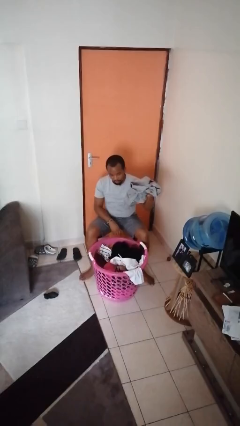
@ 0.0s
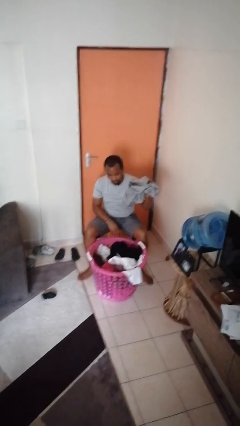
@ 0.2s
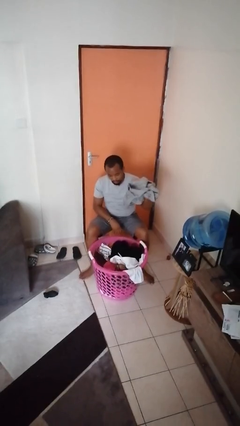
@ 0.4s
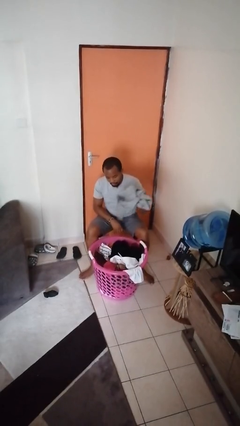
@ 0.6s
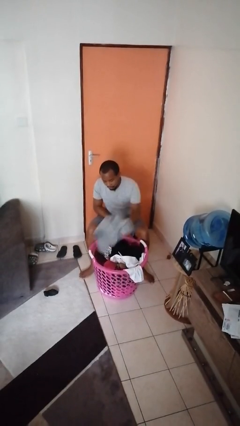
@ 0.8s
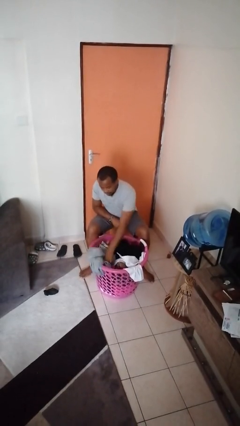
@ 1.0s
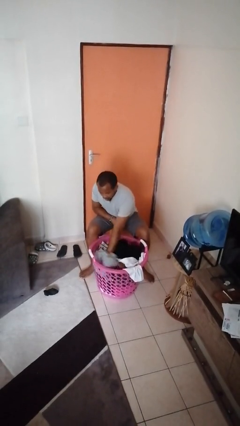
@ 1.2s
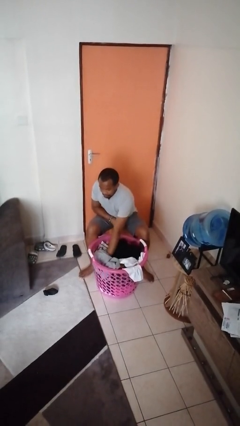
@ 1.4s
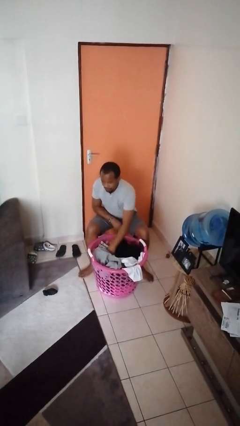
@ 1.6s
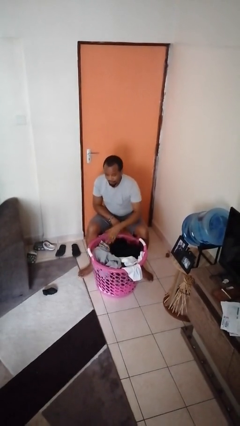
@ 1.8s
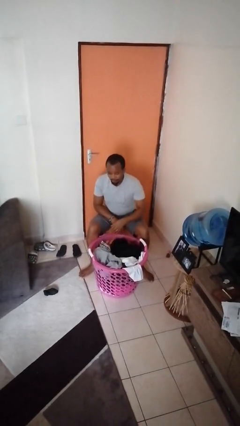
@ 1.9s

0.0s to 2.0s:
person puts object into basket

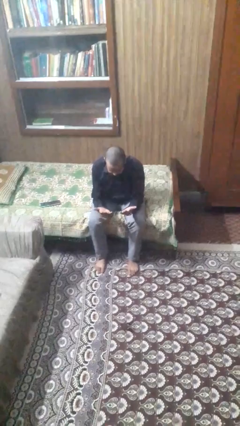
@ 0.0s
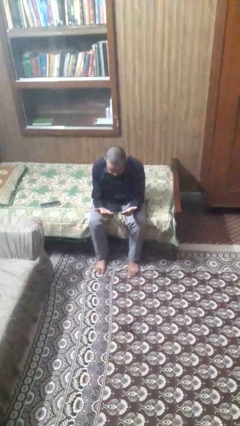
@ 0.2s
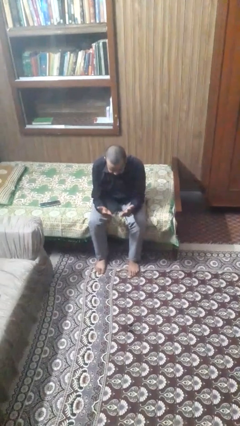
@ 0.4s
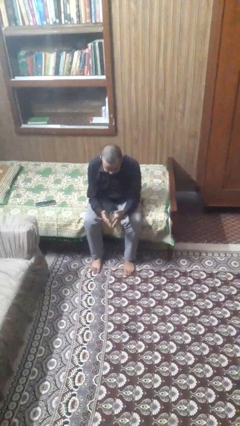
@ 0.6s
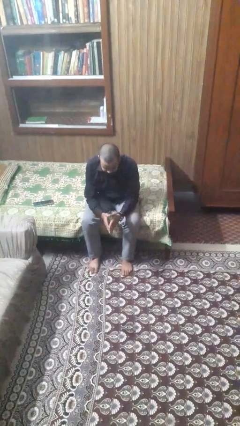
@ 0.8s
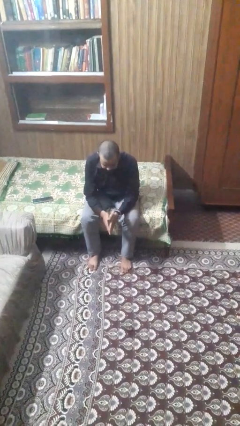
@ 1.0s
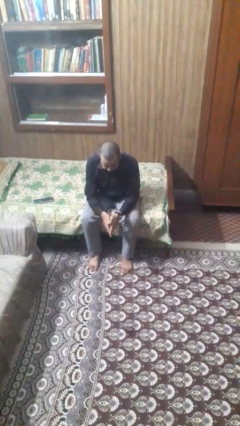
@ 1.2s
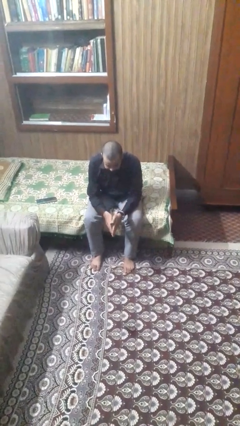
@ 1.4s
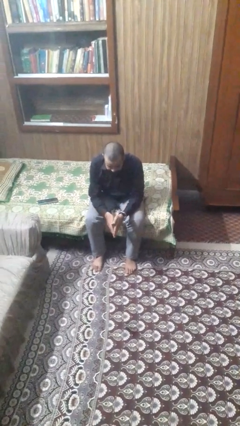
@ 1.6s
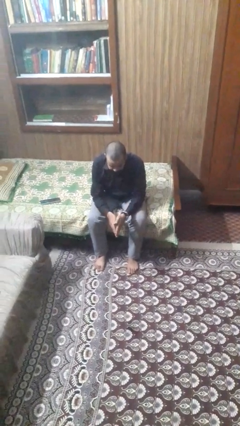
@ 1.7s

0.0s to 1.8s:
person looks at hands in lap

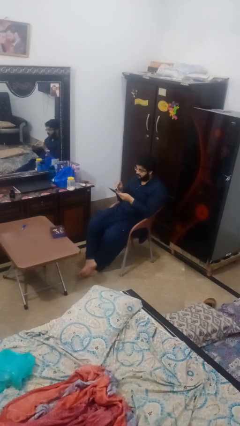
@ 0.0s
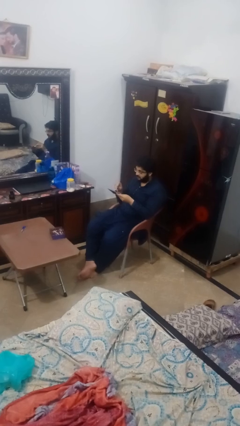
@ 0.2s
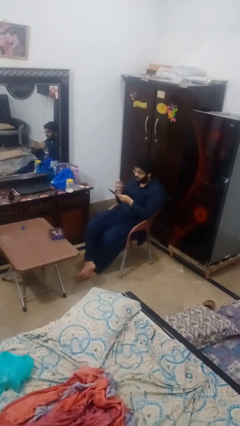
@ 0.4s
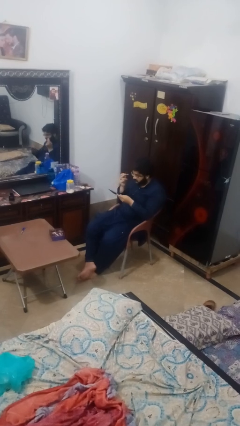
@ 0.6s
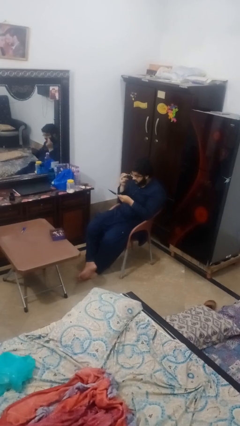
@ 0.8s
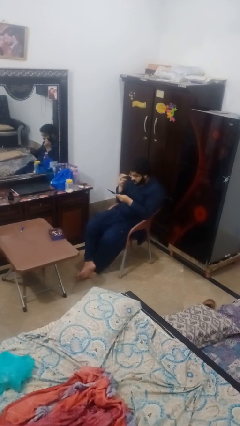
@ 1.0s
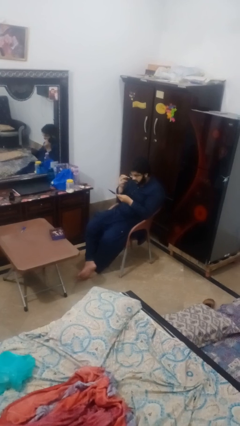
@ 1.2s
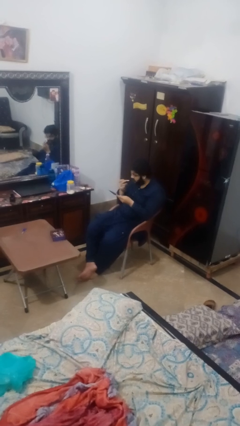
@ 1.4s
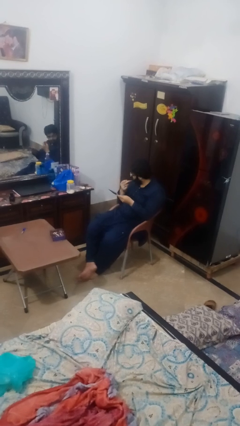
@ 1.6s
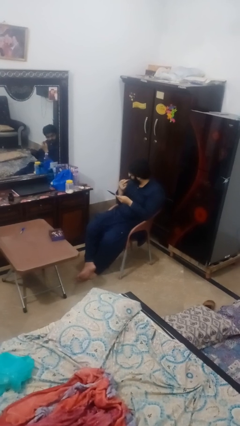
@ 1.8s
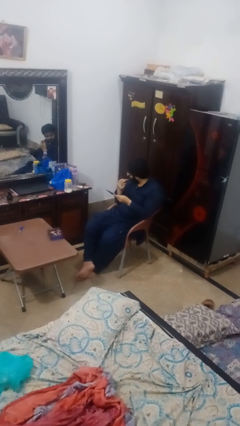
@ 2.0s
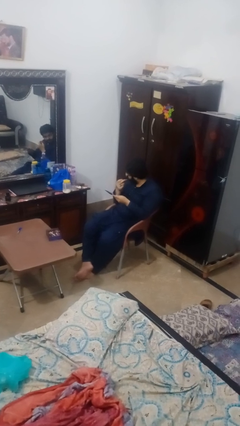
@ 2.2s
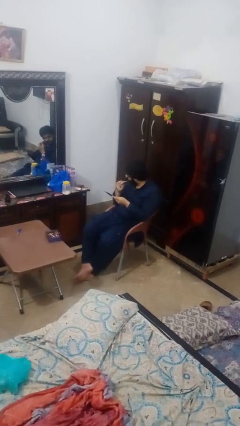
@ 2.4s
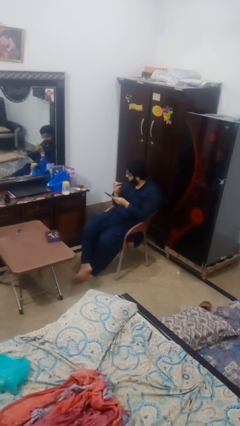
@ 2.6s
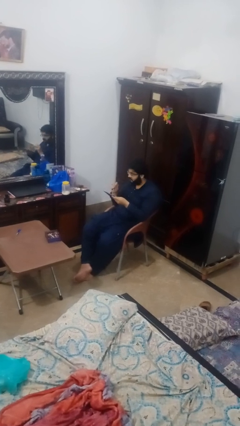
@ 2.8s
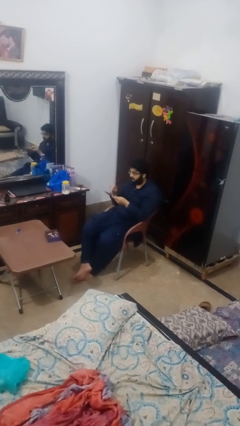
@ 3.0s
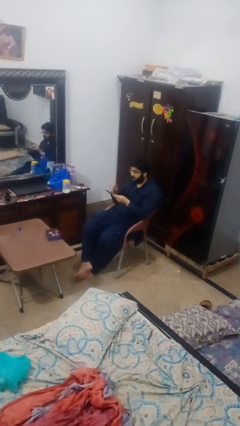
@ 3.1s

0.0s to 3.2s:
person applies foundation makeup

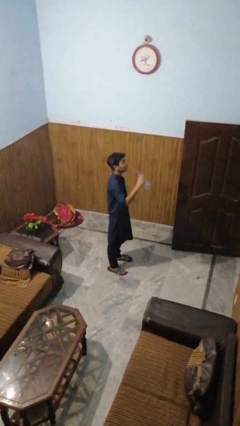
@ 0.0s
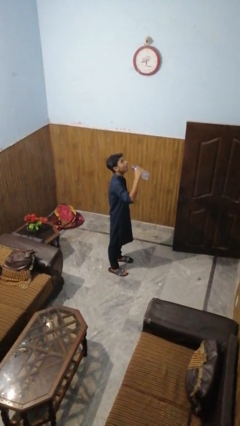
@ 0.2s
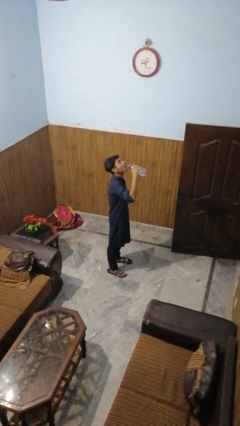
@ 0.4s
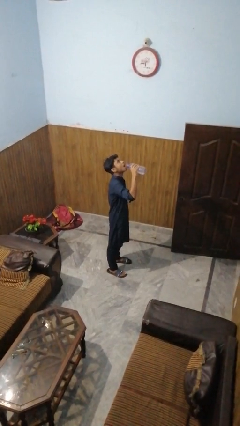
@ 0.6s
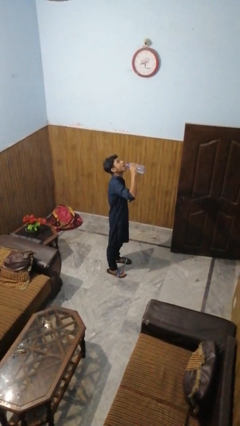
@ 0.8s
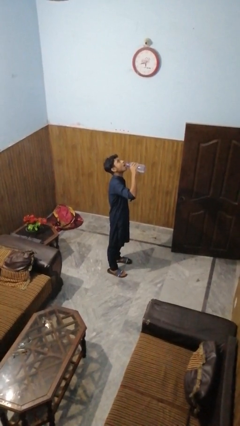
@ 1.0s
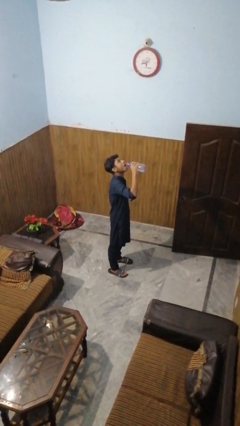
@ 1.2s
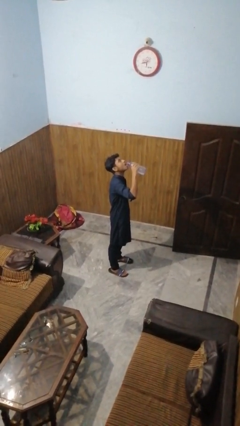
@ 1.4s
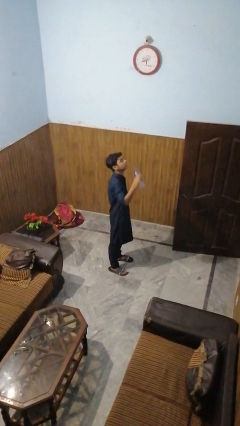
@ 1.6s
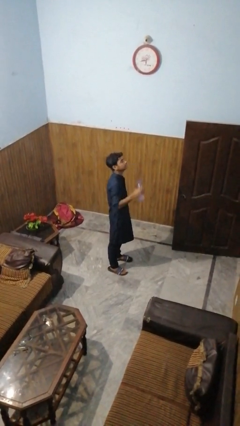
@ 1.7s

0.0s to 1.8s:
person drinks from bottle

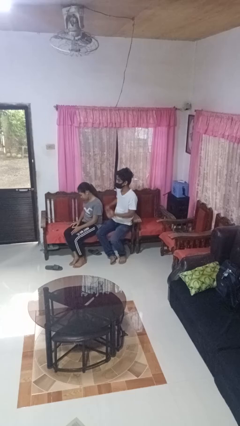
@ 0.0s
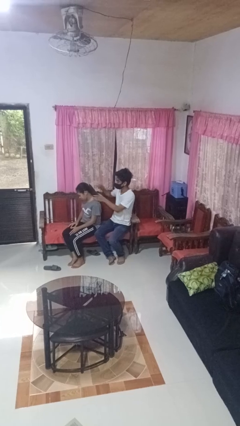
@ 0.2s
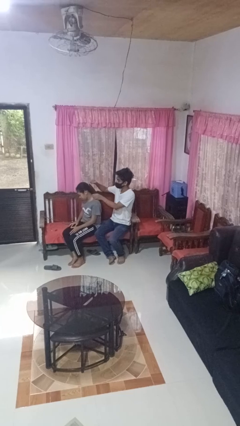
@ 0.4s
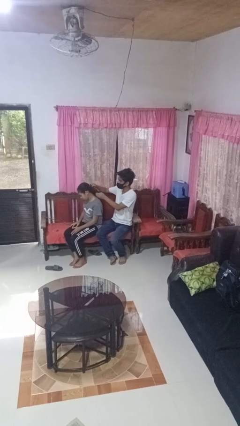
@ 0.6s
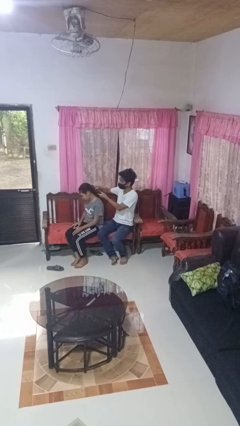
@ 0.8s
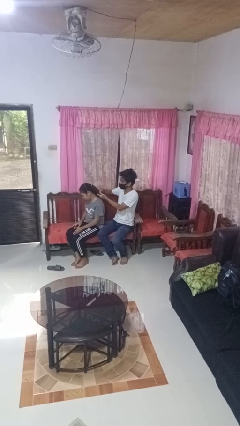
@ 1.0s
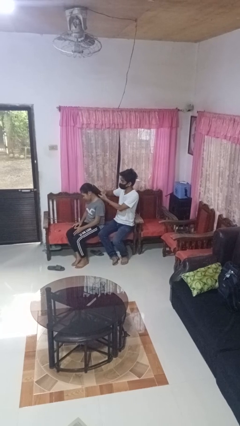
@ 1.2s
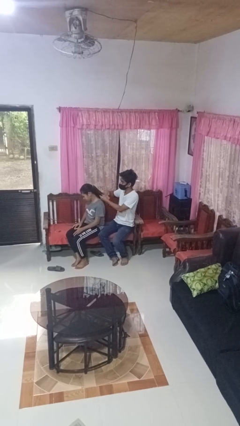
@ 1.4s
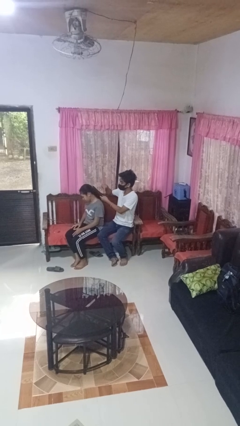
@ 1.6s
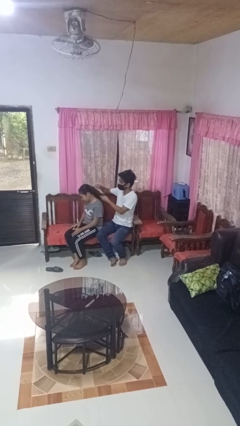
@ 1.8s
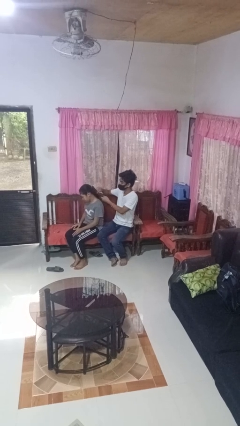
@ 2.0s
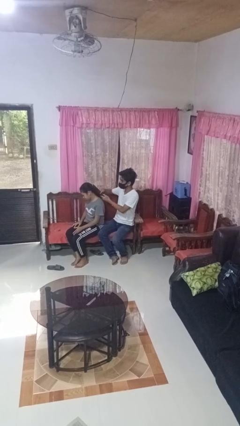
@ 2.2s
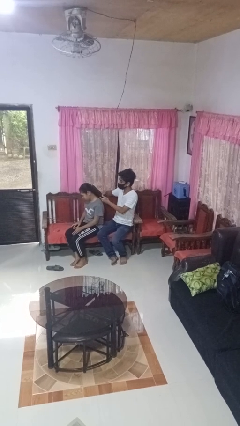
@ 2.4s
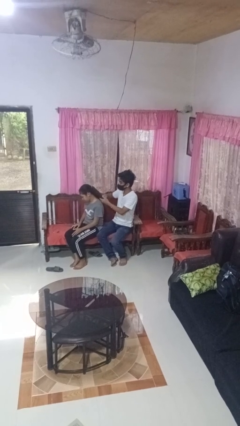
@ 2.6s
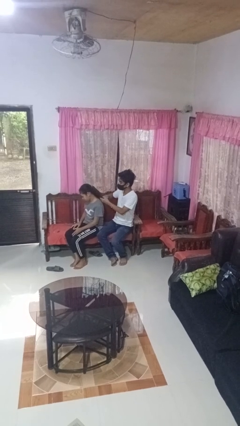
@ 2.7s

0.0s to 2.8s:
person brushes hair of person

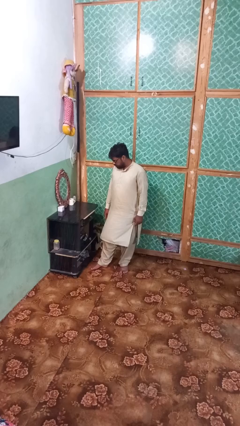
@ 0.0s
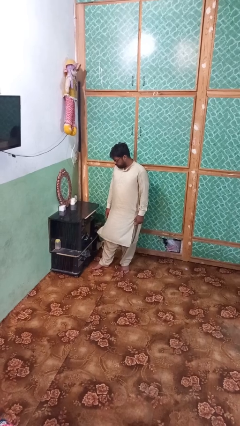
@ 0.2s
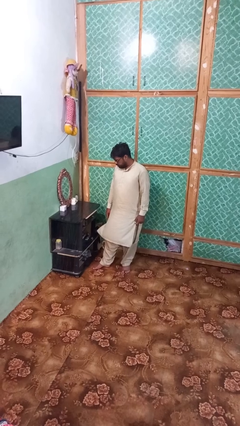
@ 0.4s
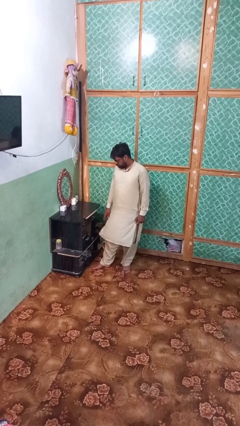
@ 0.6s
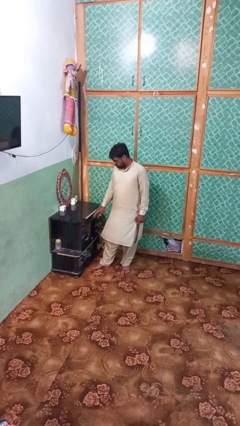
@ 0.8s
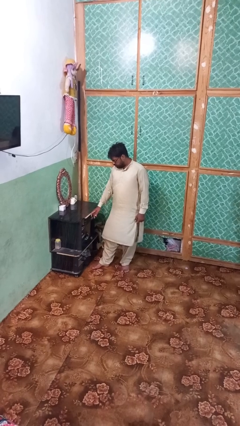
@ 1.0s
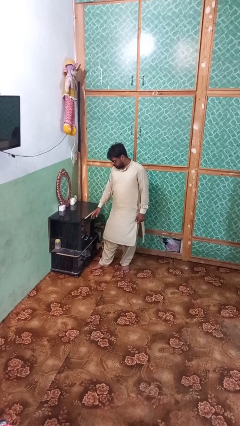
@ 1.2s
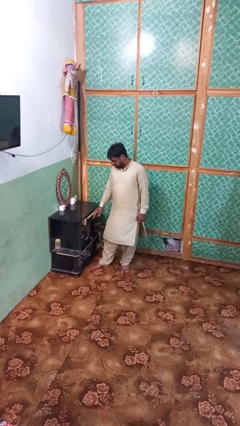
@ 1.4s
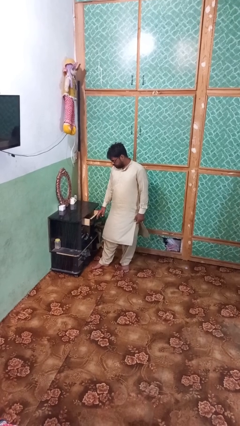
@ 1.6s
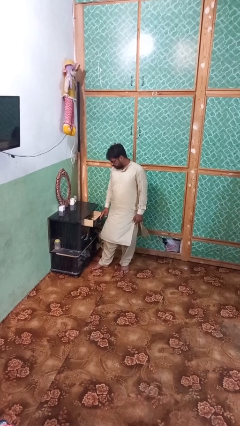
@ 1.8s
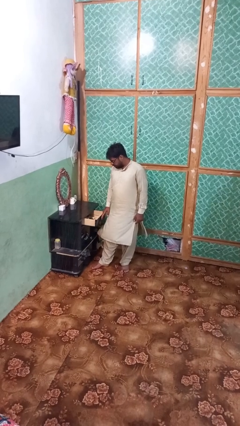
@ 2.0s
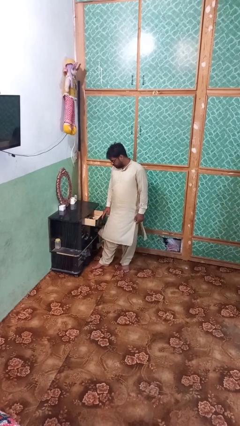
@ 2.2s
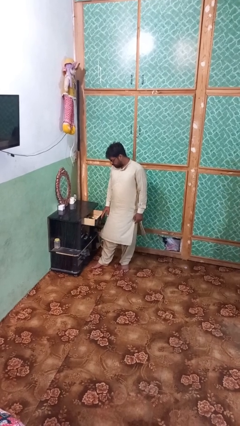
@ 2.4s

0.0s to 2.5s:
person opens dresser drawer

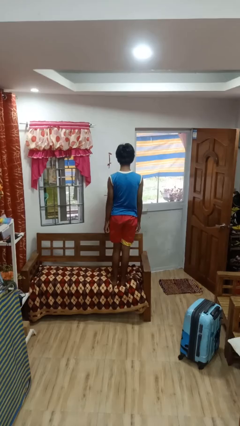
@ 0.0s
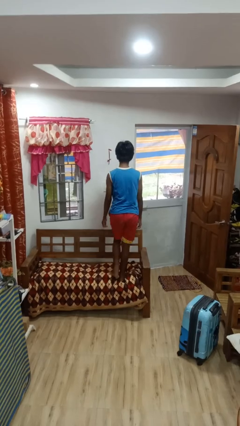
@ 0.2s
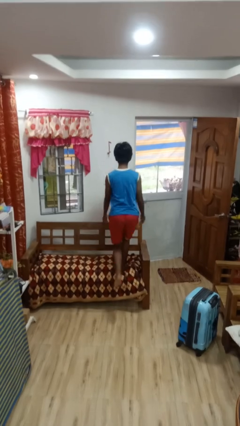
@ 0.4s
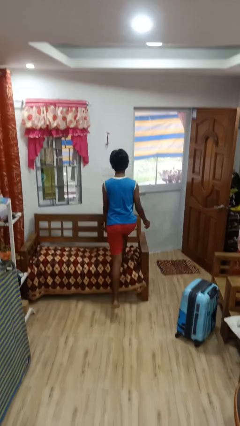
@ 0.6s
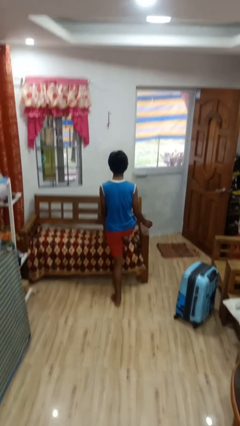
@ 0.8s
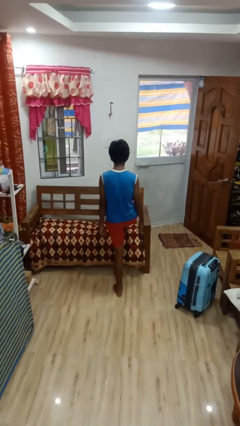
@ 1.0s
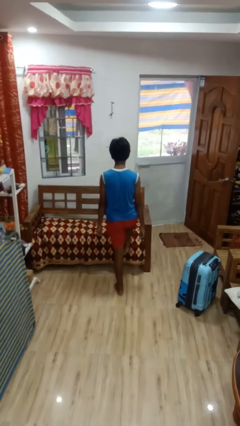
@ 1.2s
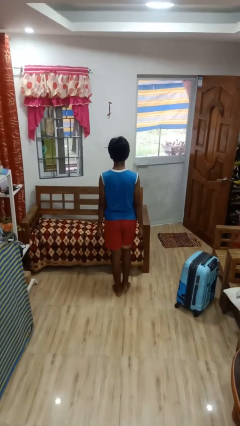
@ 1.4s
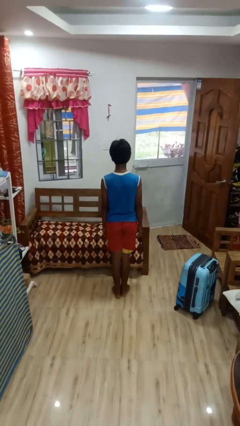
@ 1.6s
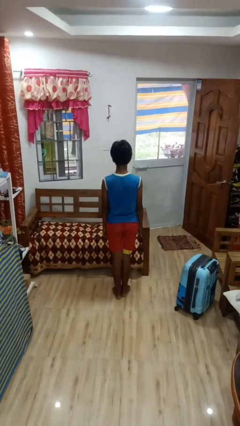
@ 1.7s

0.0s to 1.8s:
person climbs off couch

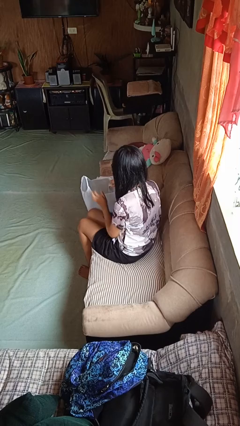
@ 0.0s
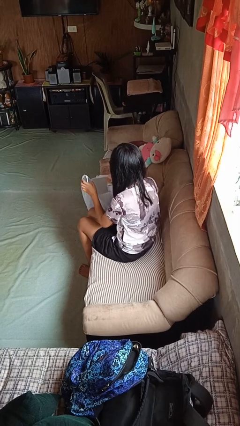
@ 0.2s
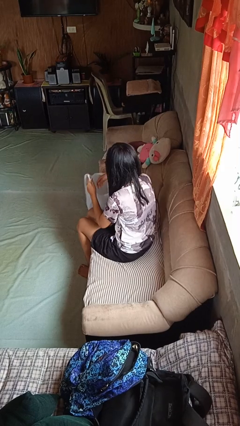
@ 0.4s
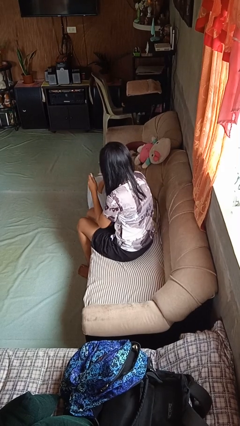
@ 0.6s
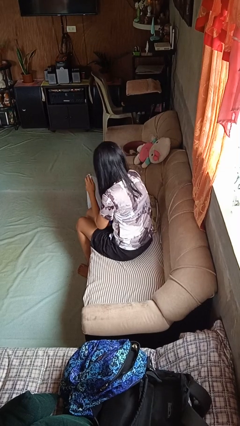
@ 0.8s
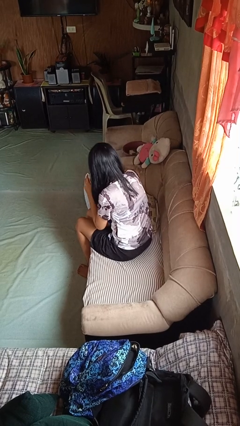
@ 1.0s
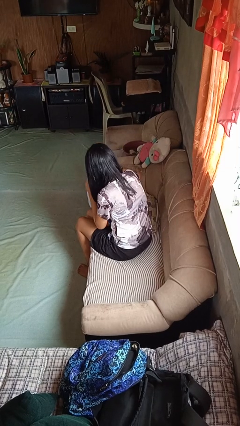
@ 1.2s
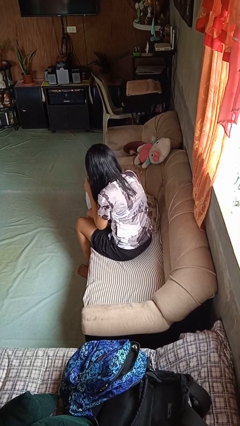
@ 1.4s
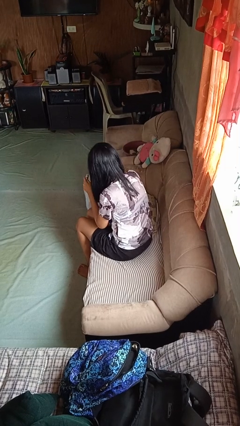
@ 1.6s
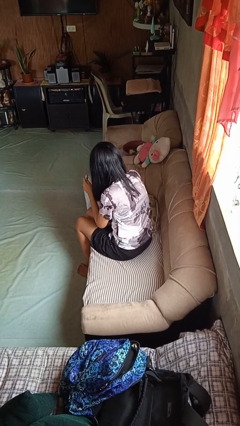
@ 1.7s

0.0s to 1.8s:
person searches in bag
